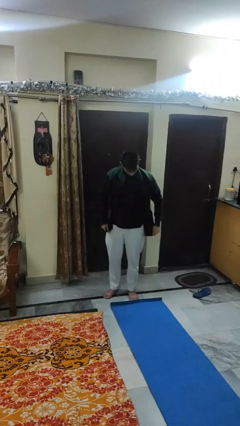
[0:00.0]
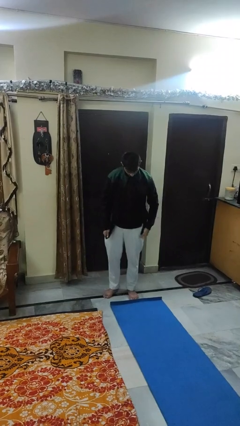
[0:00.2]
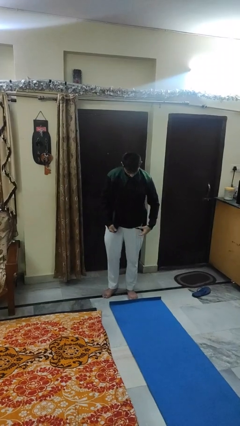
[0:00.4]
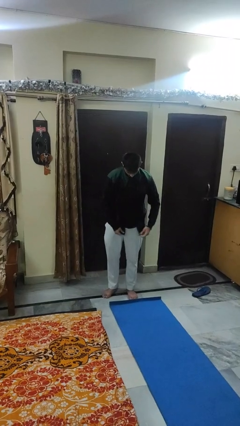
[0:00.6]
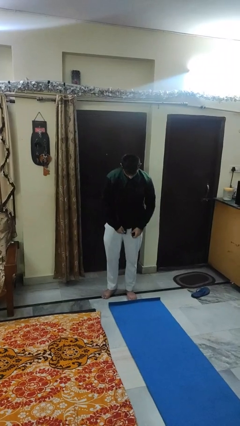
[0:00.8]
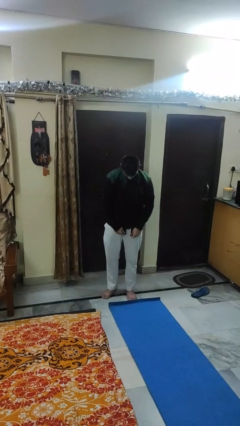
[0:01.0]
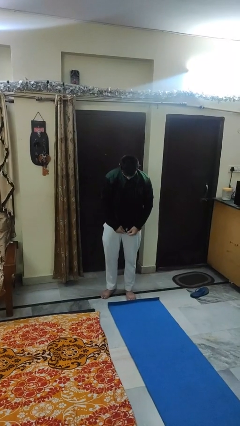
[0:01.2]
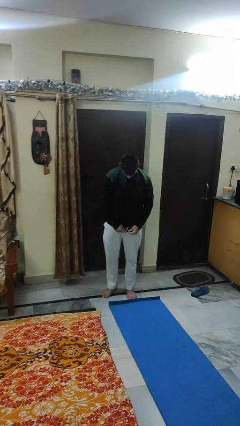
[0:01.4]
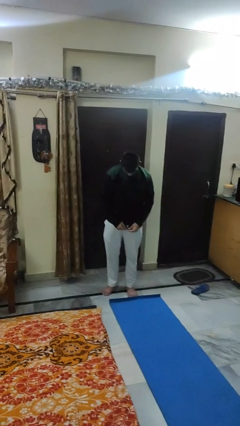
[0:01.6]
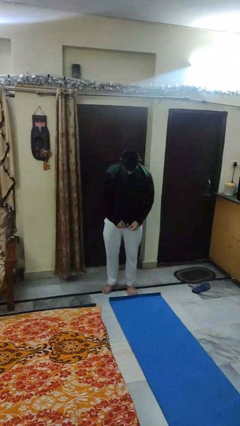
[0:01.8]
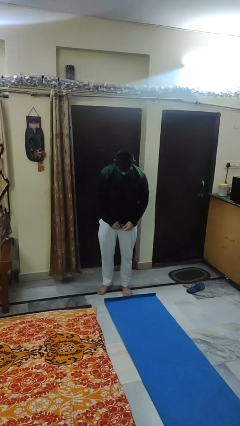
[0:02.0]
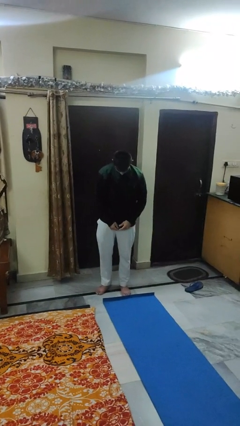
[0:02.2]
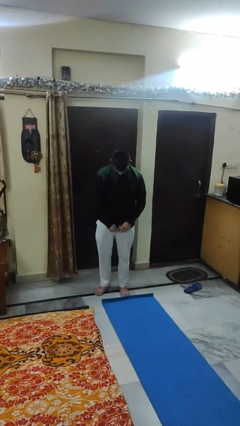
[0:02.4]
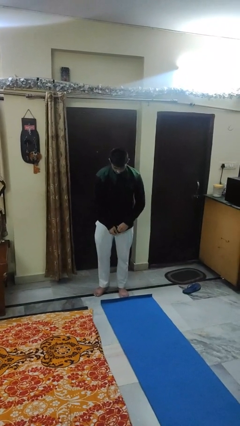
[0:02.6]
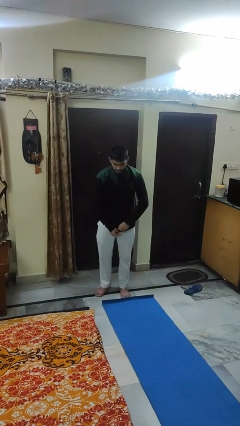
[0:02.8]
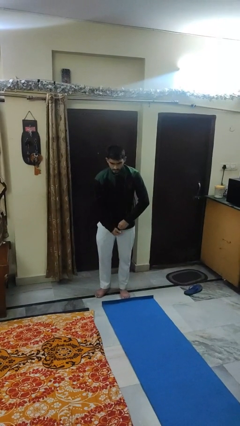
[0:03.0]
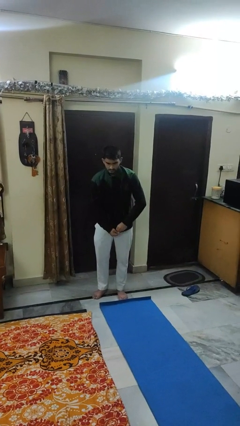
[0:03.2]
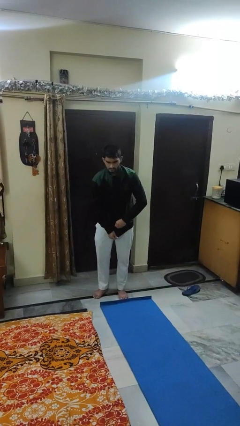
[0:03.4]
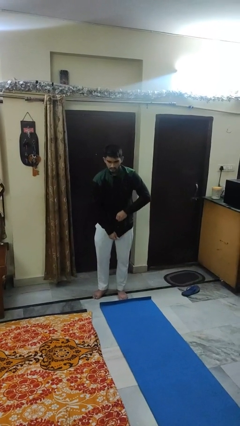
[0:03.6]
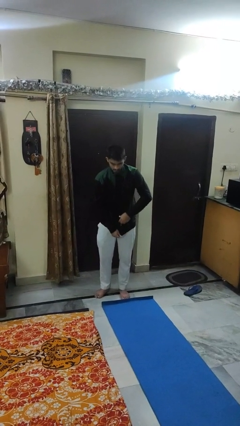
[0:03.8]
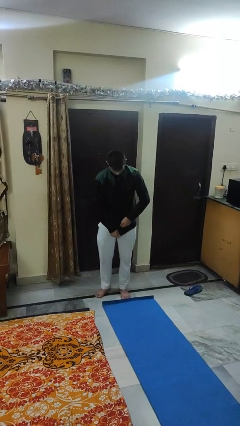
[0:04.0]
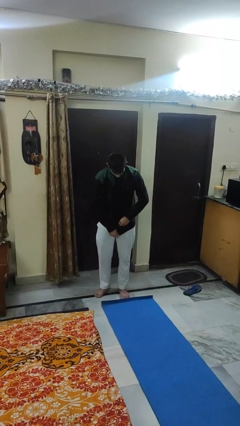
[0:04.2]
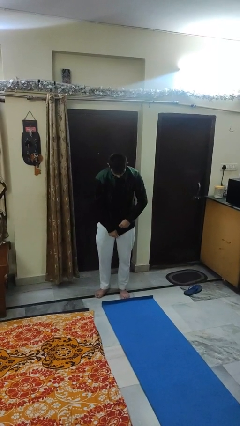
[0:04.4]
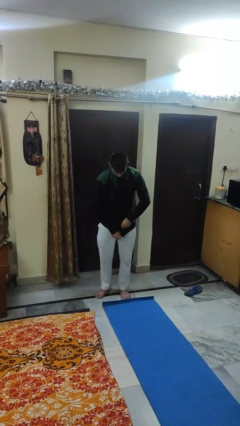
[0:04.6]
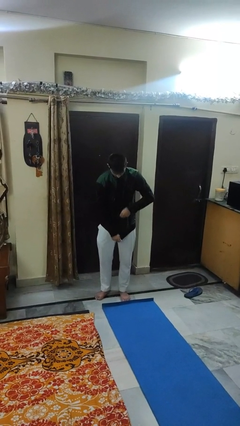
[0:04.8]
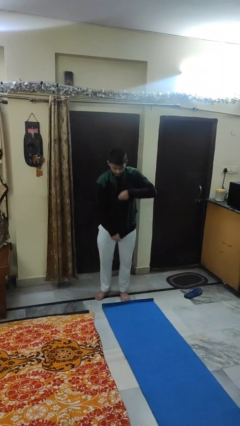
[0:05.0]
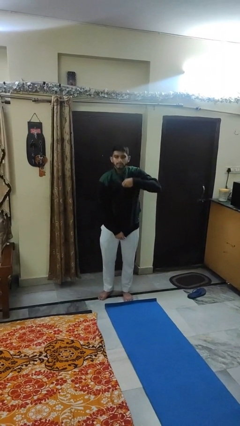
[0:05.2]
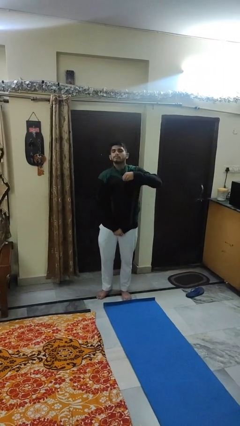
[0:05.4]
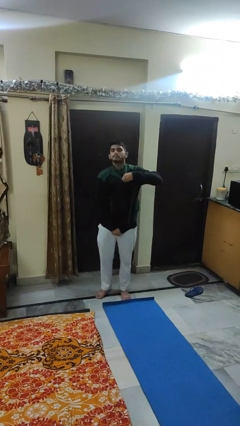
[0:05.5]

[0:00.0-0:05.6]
person zips up jacket

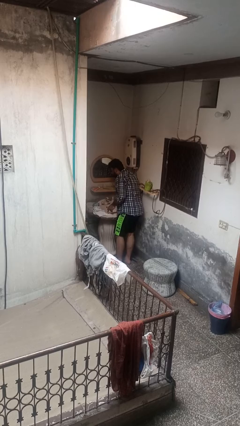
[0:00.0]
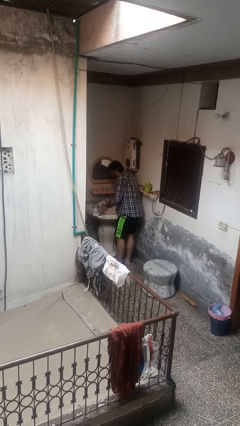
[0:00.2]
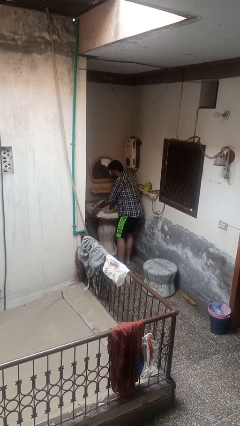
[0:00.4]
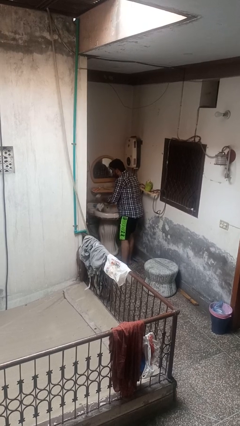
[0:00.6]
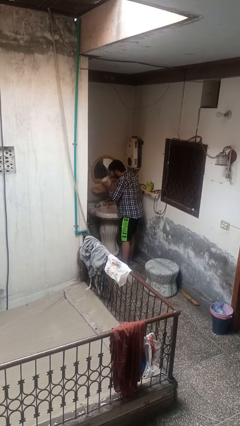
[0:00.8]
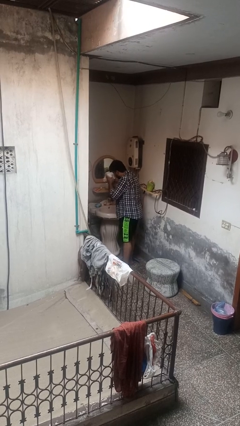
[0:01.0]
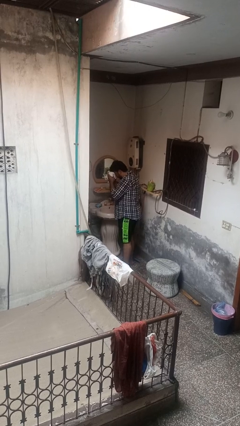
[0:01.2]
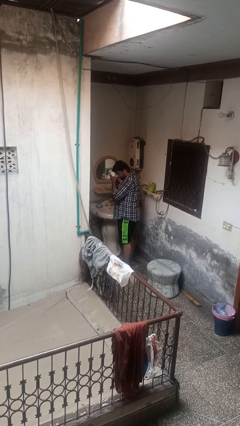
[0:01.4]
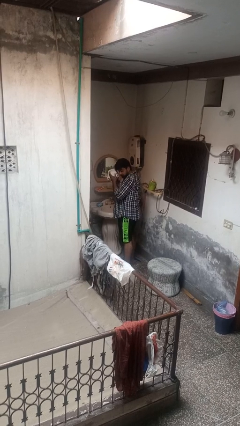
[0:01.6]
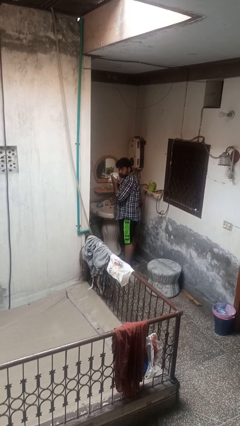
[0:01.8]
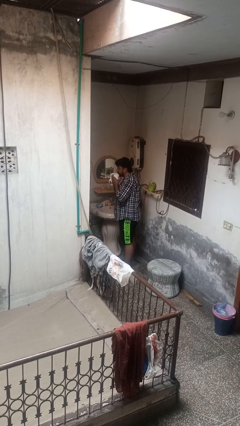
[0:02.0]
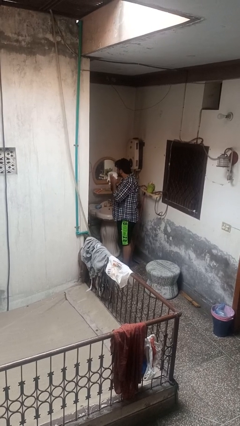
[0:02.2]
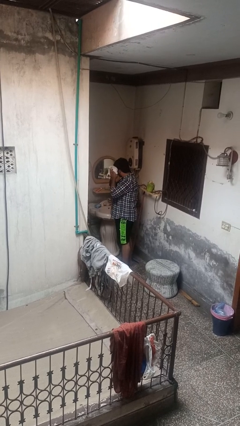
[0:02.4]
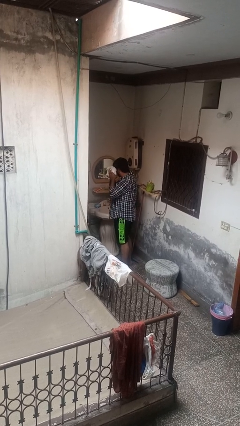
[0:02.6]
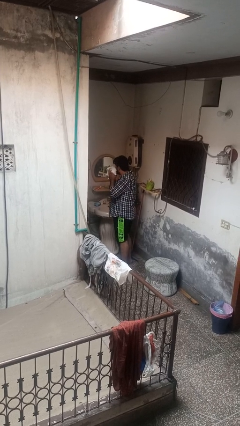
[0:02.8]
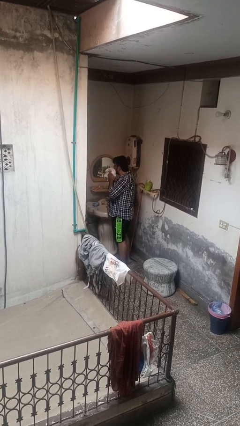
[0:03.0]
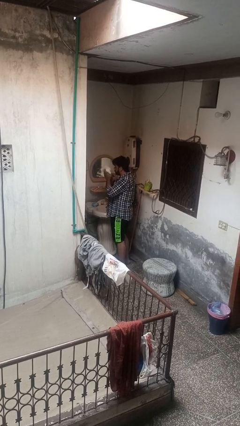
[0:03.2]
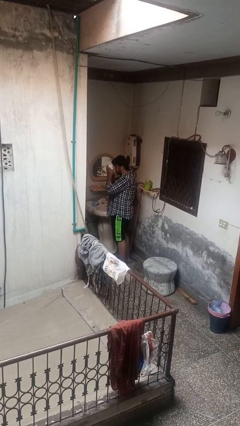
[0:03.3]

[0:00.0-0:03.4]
person dries face with towel

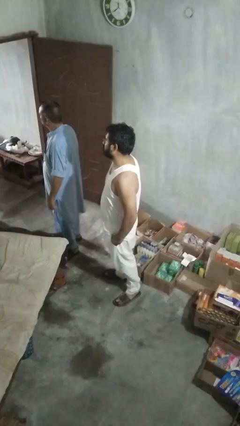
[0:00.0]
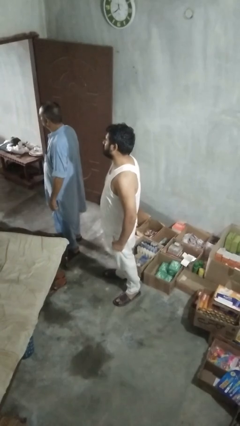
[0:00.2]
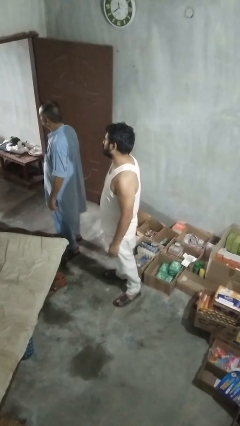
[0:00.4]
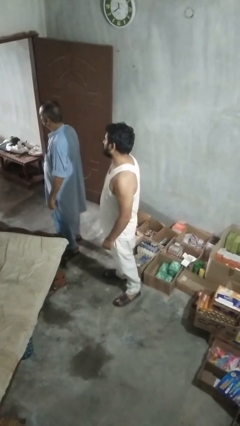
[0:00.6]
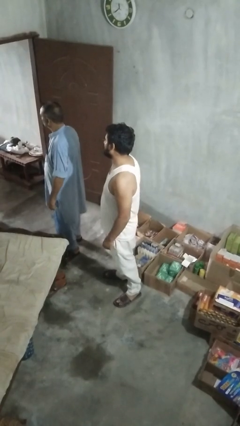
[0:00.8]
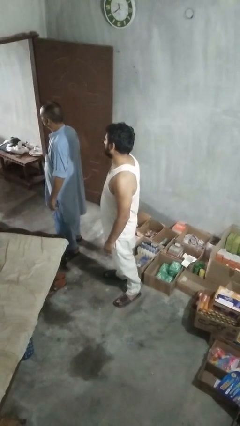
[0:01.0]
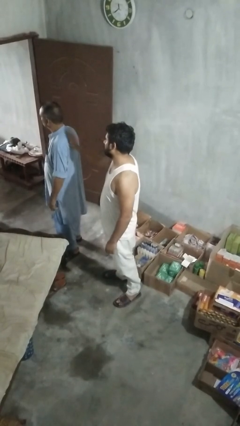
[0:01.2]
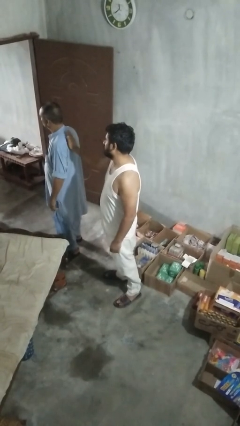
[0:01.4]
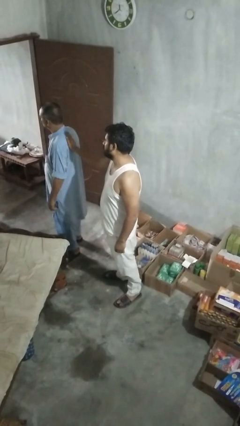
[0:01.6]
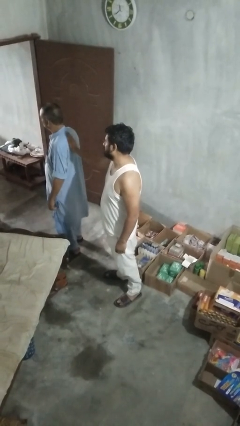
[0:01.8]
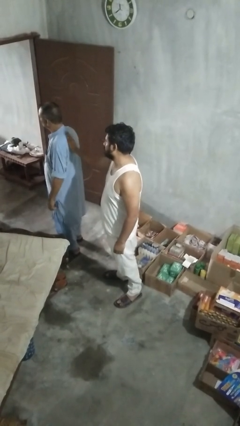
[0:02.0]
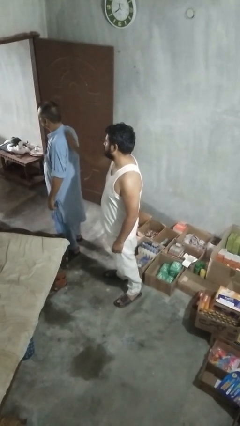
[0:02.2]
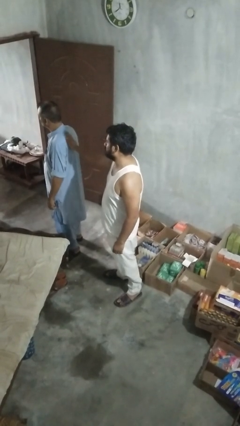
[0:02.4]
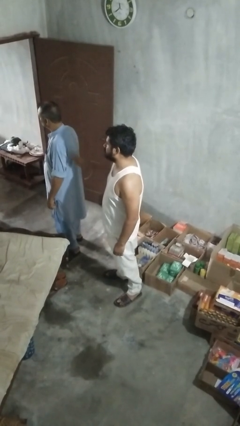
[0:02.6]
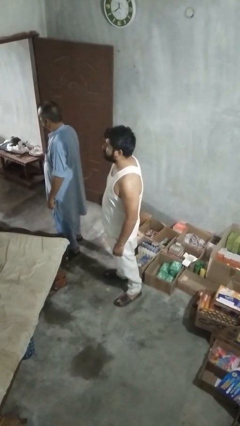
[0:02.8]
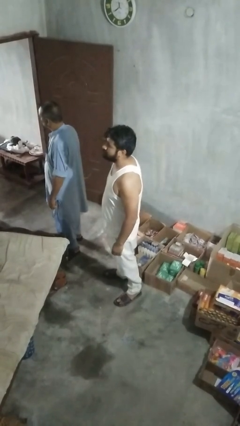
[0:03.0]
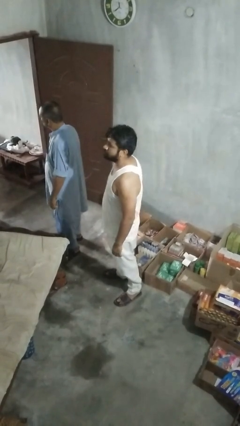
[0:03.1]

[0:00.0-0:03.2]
person touches back of person

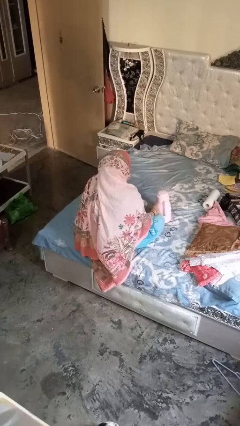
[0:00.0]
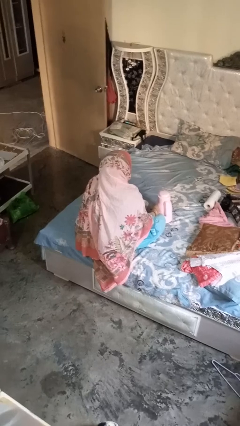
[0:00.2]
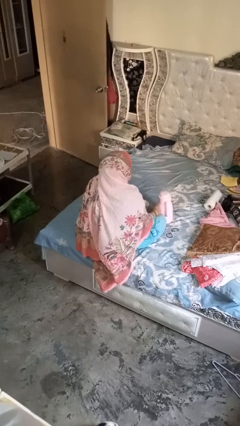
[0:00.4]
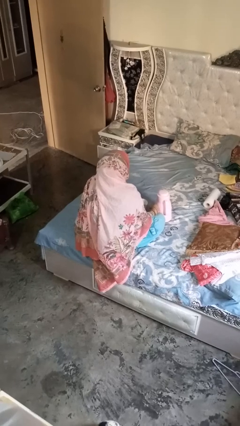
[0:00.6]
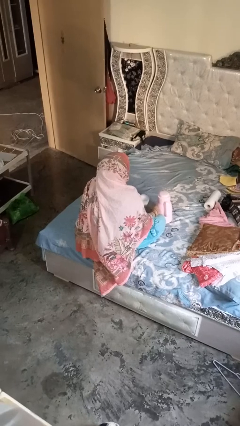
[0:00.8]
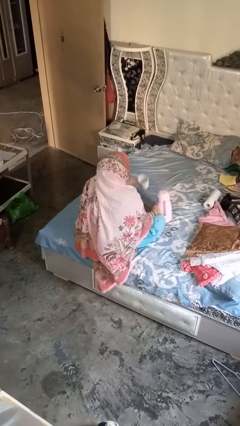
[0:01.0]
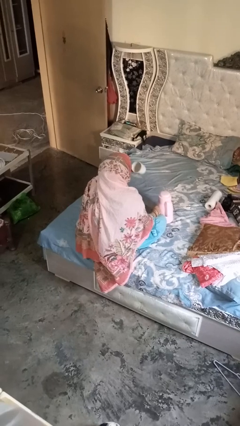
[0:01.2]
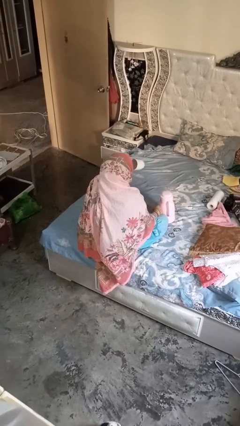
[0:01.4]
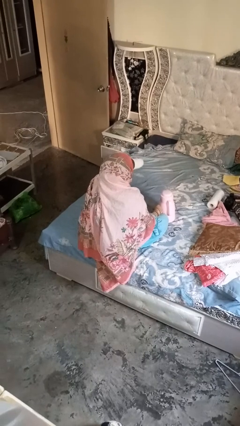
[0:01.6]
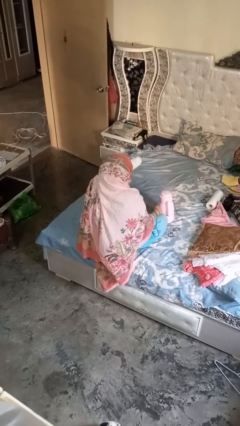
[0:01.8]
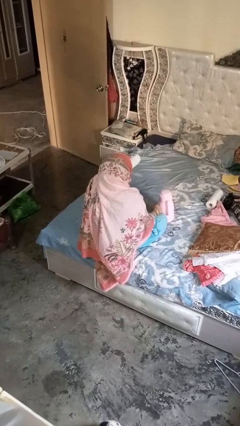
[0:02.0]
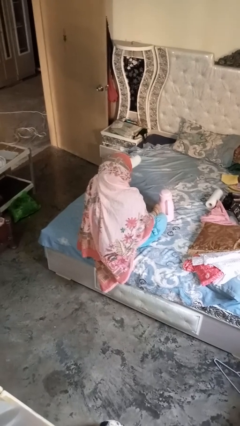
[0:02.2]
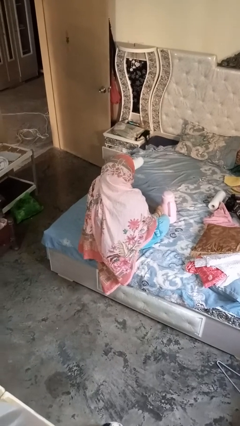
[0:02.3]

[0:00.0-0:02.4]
person pours coffee into mug

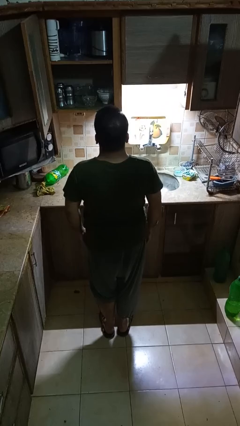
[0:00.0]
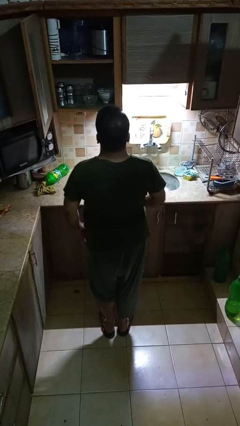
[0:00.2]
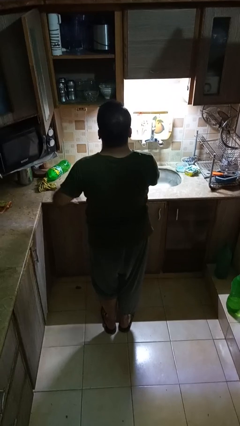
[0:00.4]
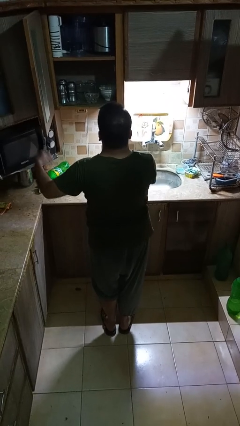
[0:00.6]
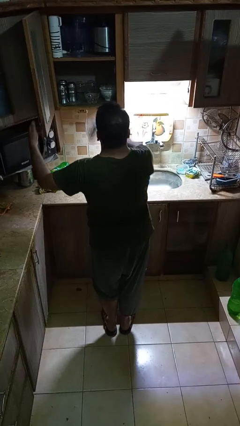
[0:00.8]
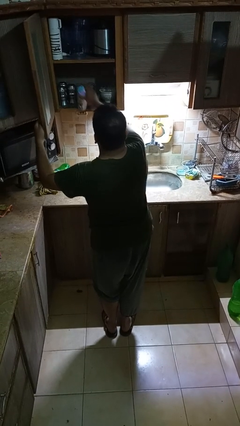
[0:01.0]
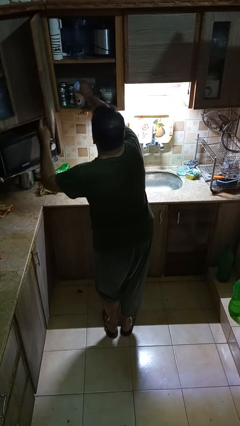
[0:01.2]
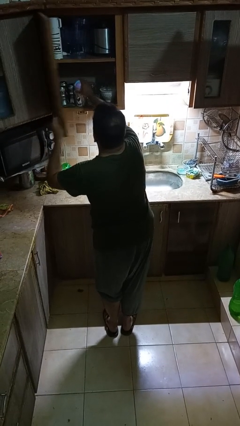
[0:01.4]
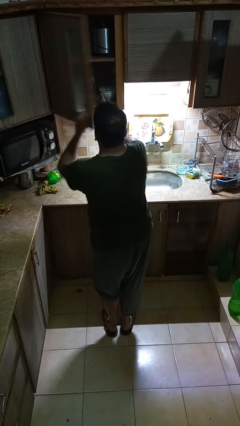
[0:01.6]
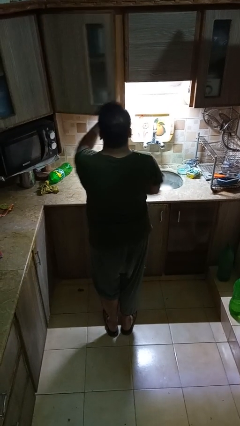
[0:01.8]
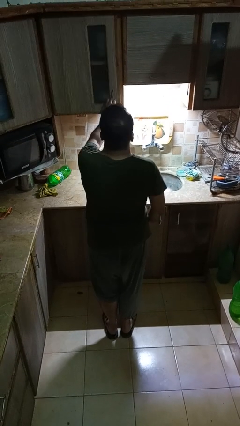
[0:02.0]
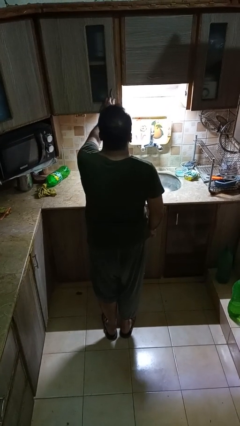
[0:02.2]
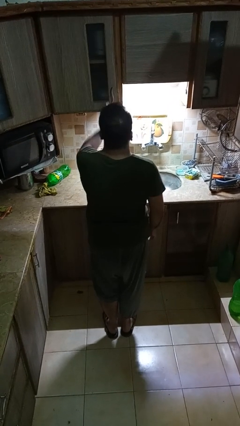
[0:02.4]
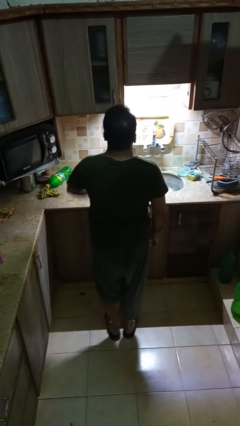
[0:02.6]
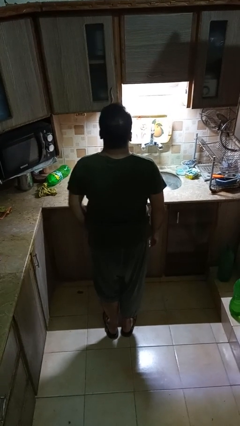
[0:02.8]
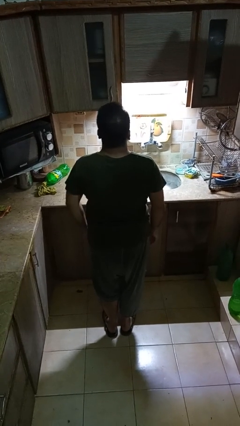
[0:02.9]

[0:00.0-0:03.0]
person puts object in cabinet
